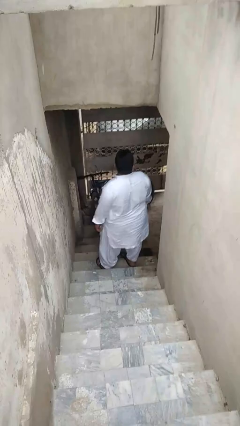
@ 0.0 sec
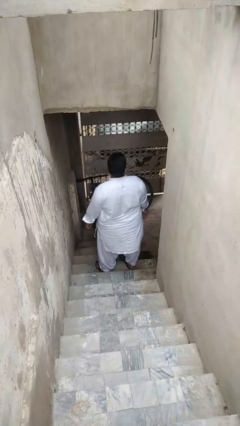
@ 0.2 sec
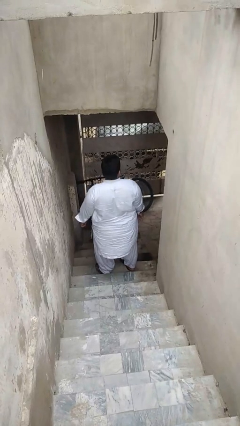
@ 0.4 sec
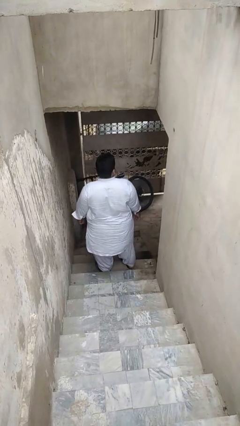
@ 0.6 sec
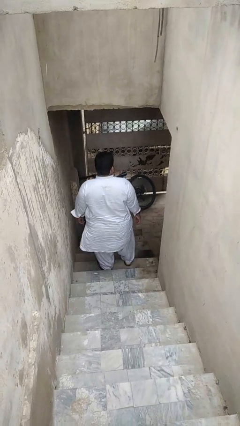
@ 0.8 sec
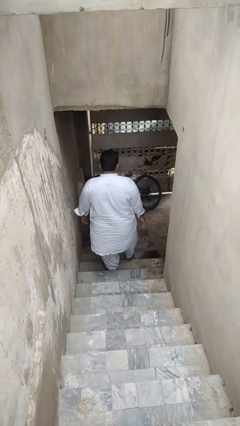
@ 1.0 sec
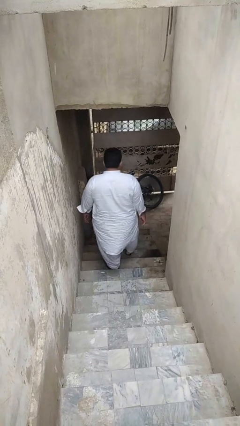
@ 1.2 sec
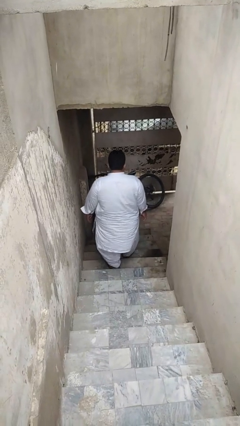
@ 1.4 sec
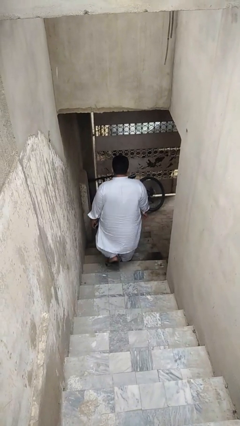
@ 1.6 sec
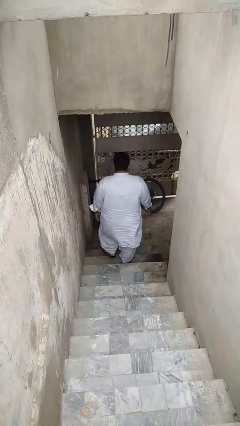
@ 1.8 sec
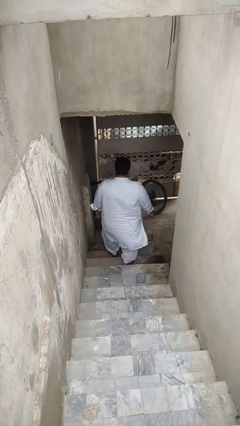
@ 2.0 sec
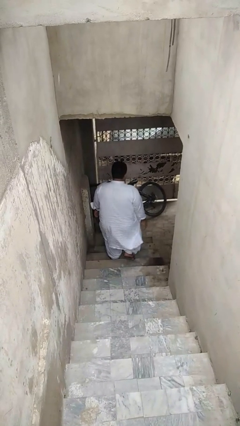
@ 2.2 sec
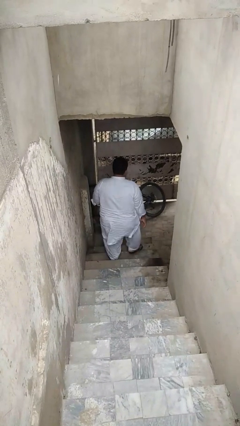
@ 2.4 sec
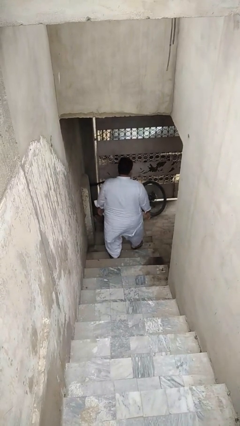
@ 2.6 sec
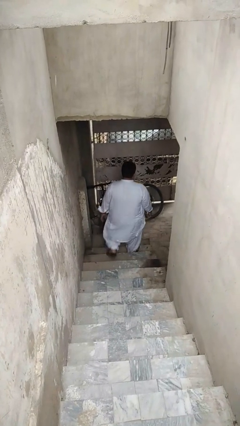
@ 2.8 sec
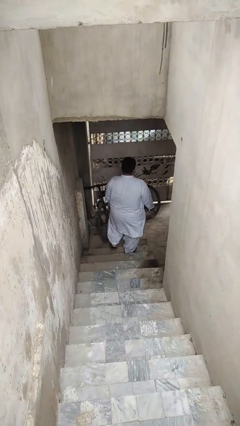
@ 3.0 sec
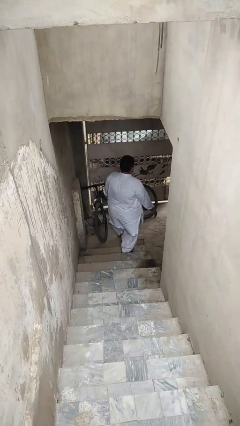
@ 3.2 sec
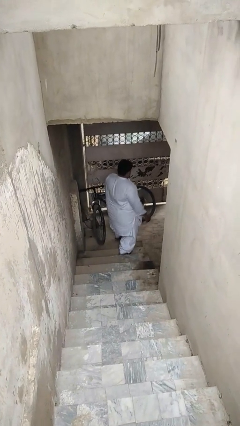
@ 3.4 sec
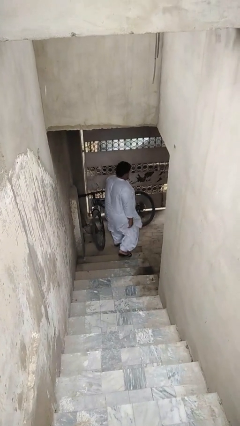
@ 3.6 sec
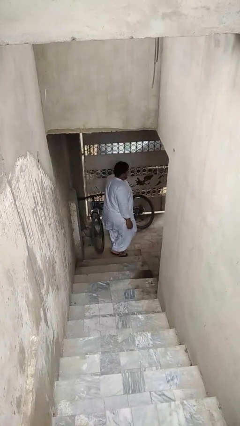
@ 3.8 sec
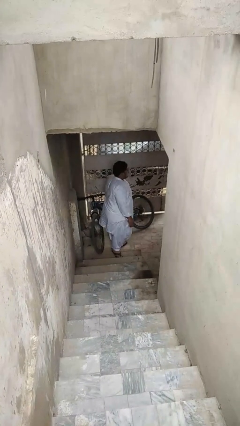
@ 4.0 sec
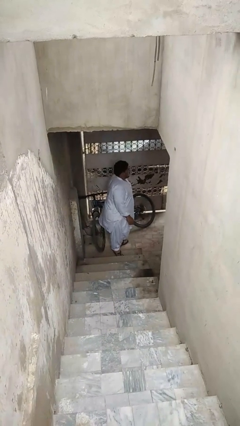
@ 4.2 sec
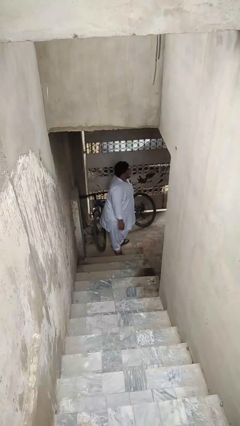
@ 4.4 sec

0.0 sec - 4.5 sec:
person climbs down stairs

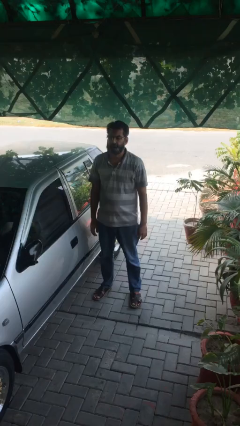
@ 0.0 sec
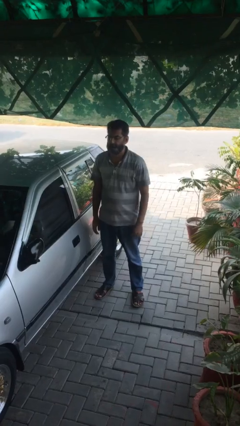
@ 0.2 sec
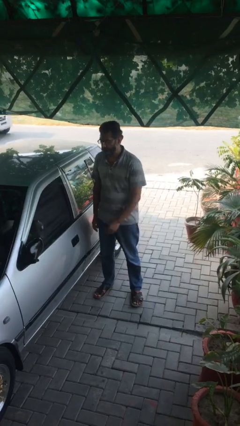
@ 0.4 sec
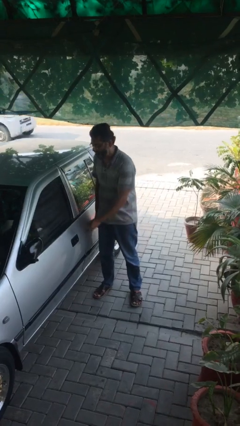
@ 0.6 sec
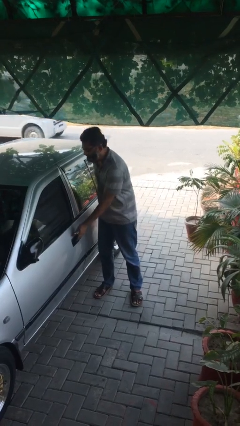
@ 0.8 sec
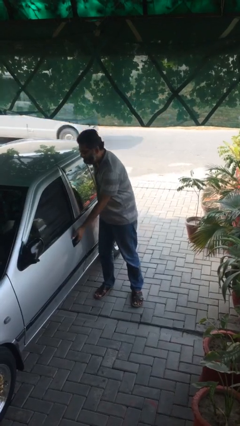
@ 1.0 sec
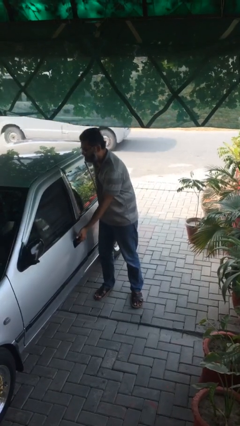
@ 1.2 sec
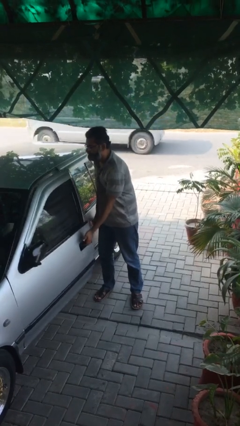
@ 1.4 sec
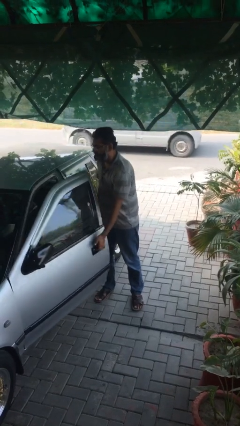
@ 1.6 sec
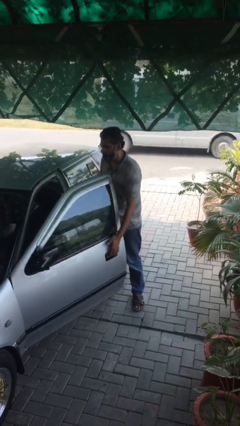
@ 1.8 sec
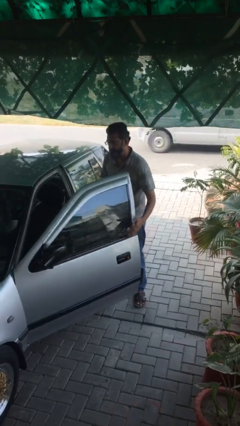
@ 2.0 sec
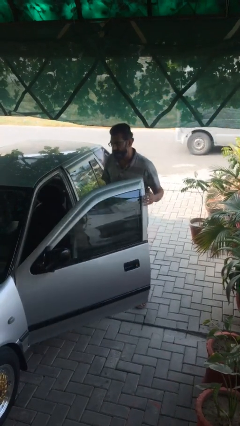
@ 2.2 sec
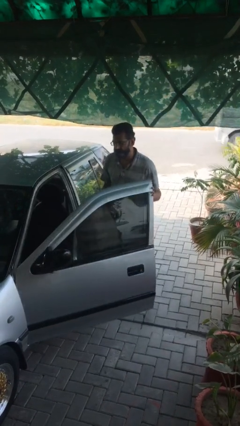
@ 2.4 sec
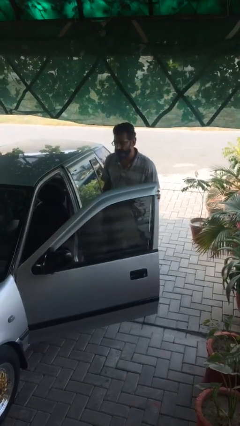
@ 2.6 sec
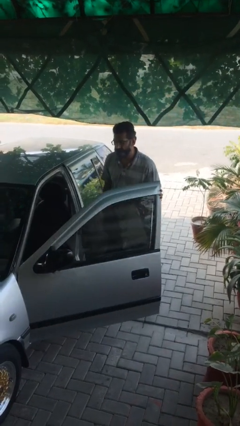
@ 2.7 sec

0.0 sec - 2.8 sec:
person opens car door

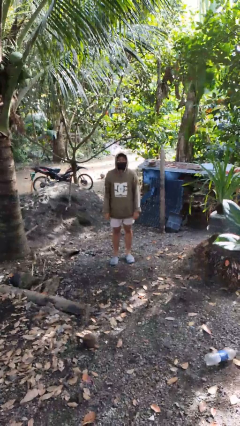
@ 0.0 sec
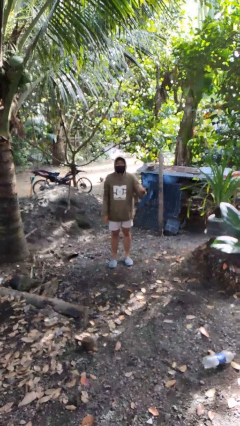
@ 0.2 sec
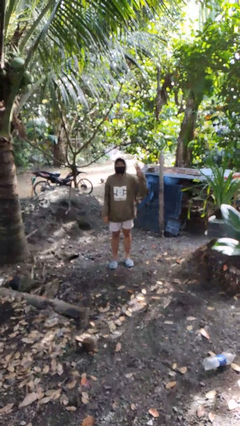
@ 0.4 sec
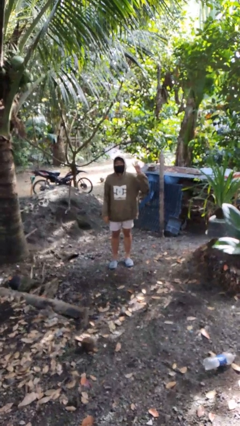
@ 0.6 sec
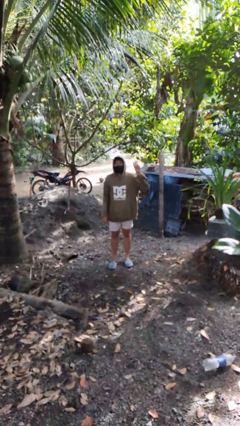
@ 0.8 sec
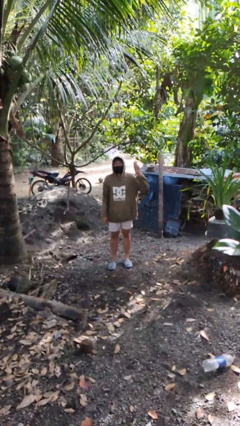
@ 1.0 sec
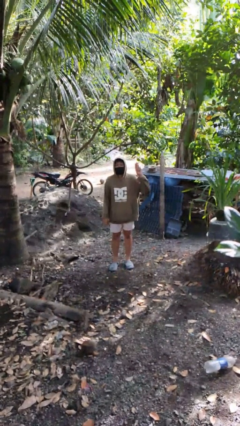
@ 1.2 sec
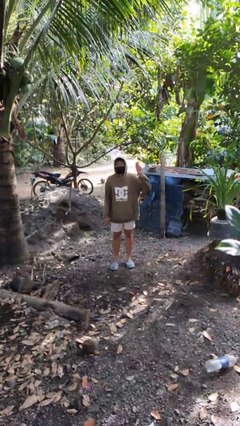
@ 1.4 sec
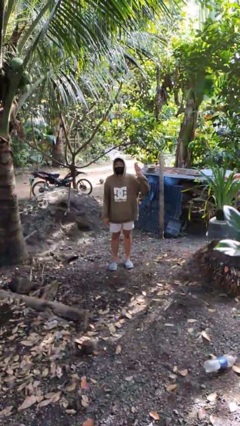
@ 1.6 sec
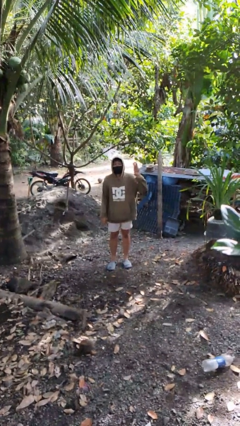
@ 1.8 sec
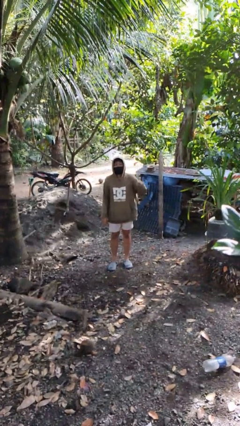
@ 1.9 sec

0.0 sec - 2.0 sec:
person gestures number three

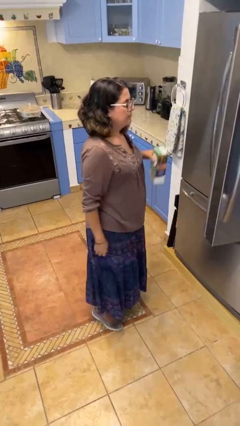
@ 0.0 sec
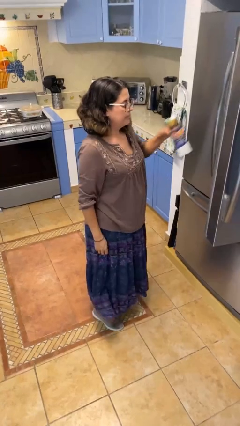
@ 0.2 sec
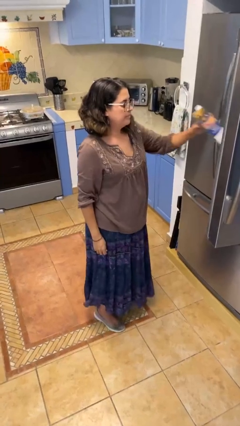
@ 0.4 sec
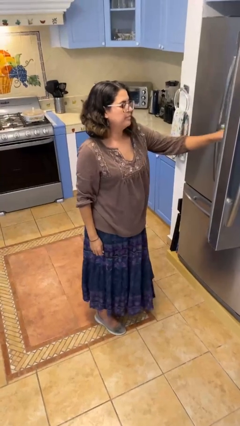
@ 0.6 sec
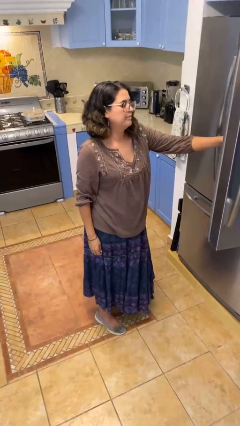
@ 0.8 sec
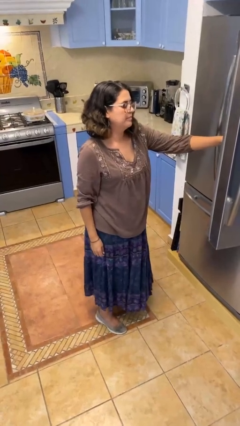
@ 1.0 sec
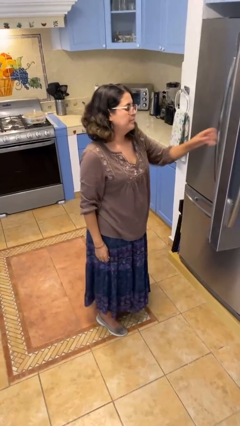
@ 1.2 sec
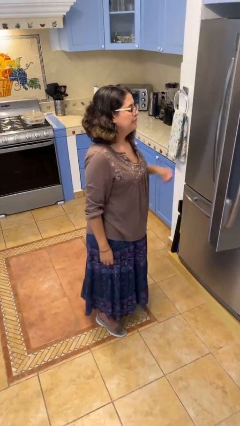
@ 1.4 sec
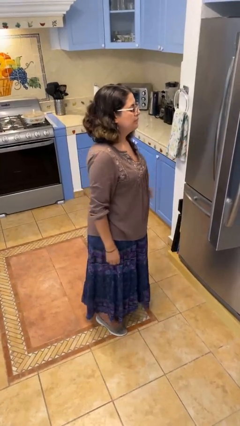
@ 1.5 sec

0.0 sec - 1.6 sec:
person puts object into refrigerator

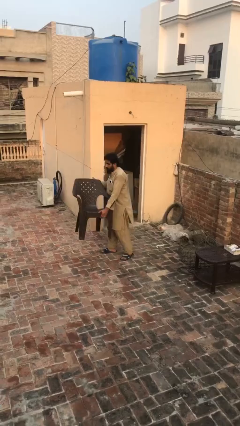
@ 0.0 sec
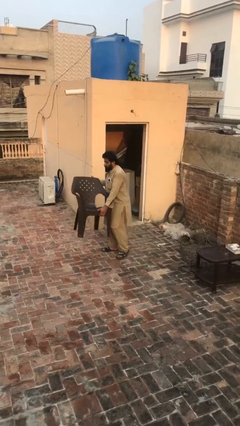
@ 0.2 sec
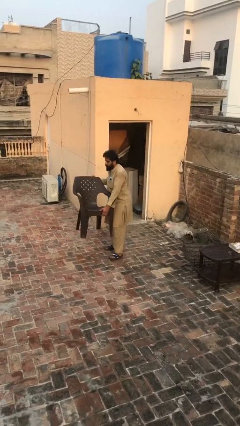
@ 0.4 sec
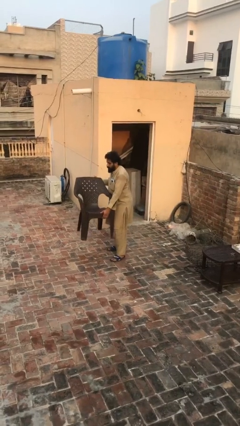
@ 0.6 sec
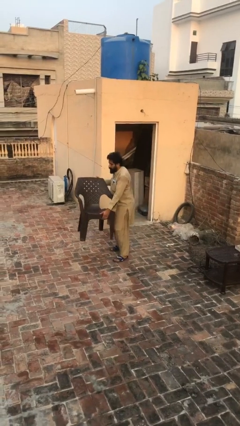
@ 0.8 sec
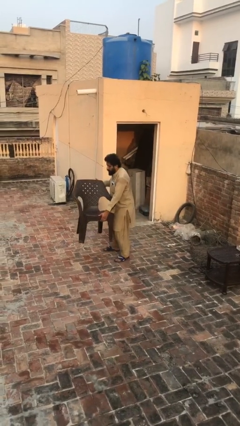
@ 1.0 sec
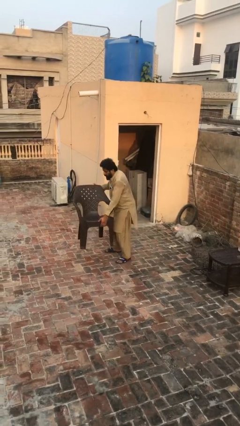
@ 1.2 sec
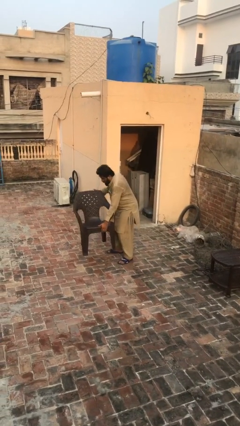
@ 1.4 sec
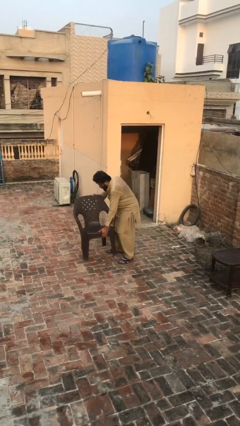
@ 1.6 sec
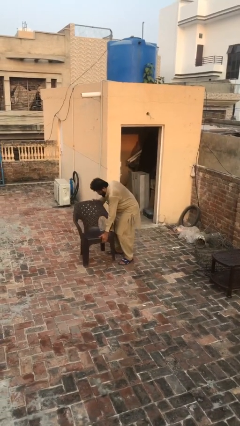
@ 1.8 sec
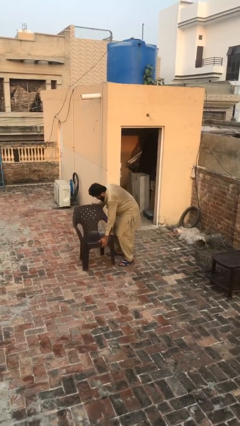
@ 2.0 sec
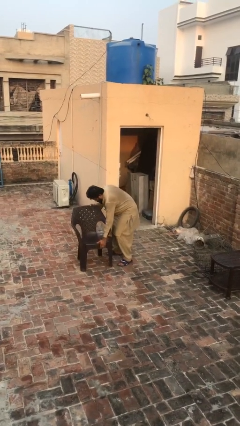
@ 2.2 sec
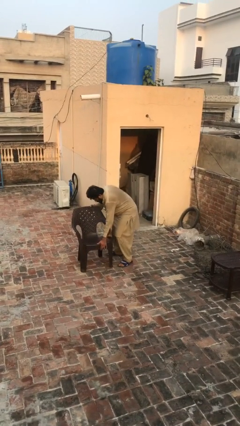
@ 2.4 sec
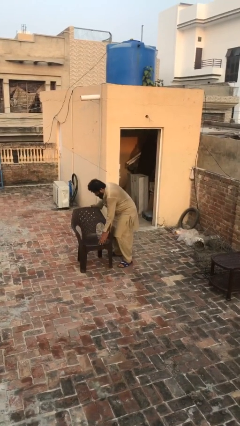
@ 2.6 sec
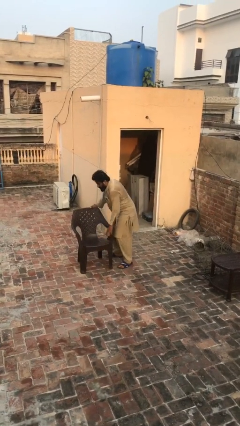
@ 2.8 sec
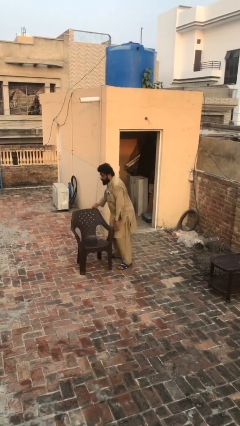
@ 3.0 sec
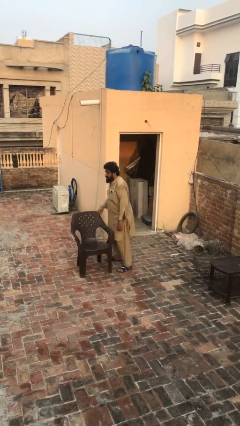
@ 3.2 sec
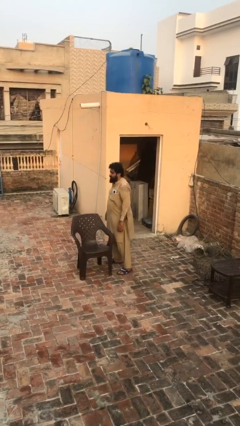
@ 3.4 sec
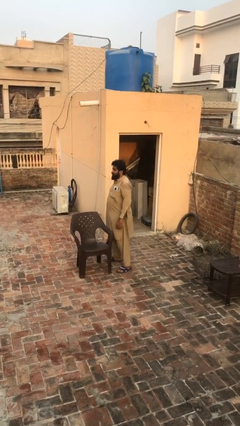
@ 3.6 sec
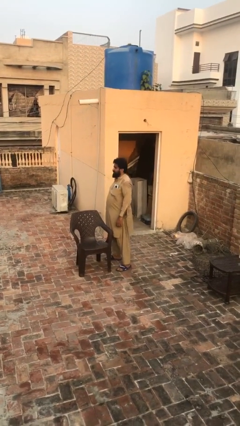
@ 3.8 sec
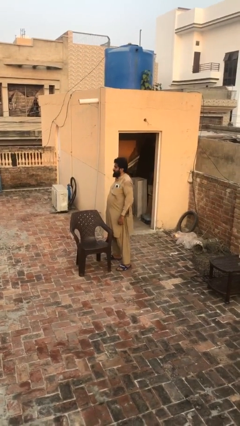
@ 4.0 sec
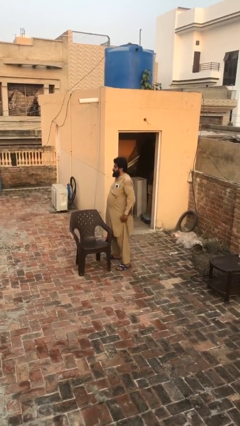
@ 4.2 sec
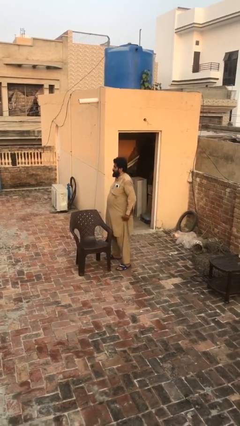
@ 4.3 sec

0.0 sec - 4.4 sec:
person puts down object on floor

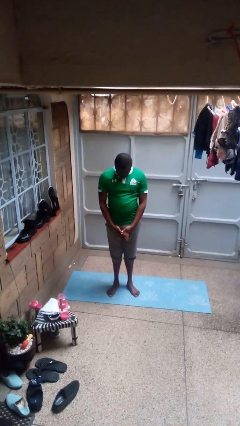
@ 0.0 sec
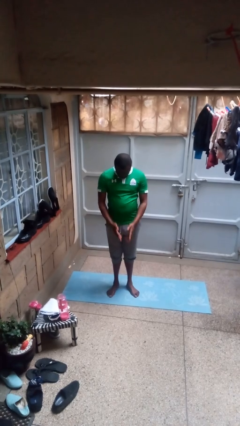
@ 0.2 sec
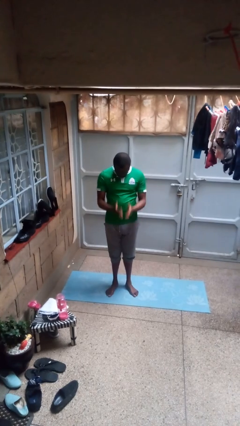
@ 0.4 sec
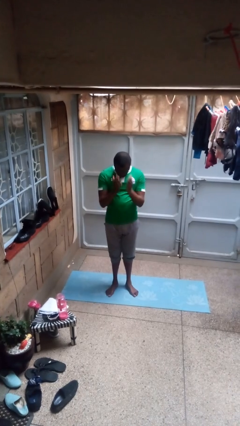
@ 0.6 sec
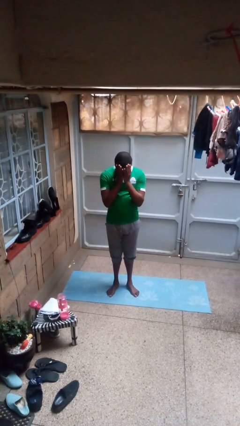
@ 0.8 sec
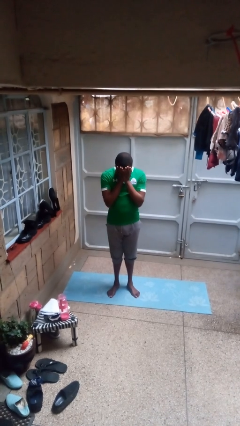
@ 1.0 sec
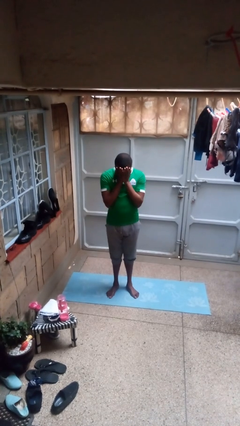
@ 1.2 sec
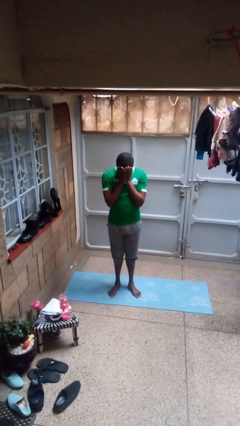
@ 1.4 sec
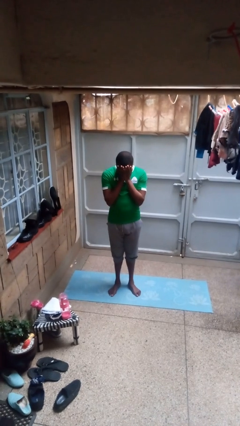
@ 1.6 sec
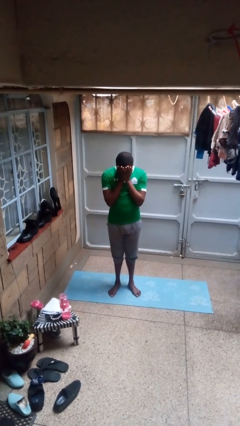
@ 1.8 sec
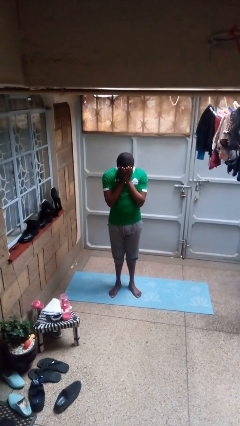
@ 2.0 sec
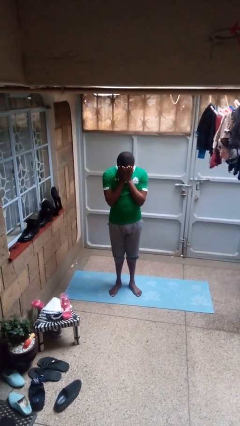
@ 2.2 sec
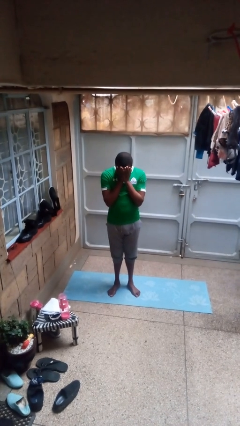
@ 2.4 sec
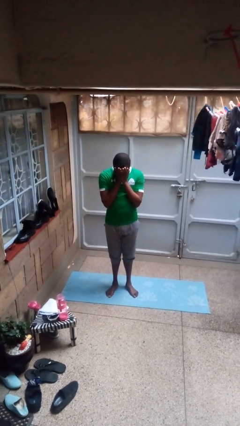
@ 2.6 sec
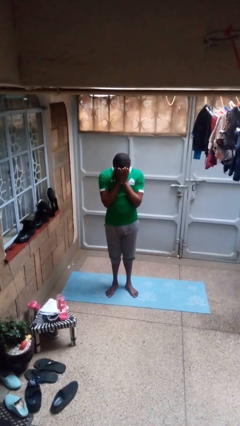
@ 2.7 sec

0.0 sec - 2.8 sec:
person covers face with hands
